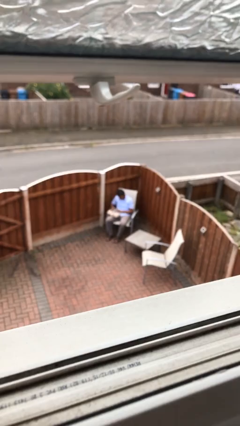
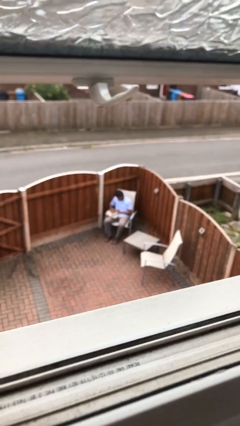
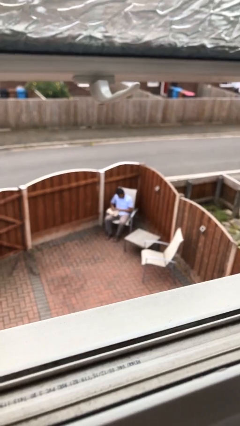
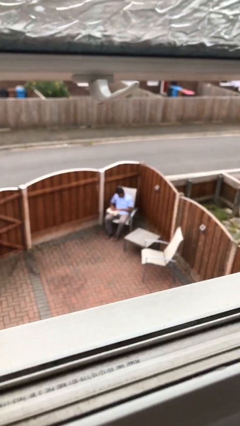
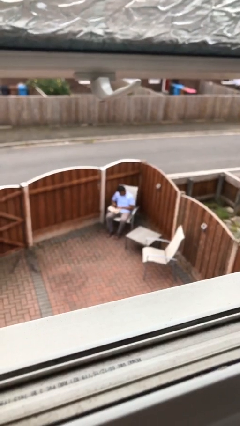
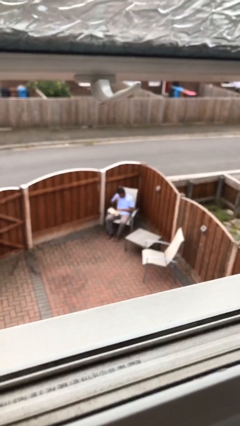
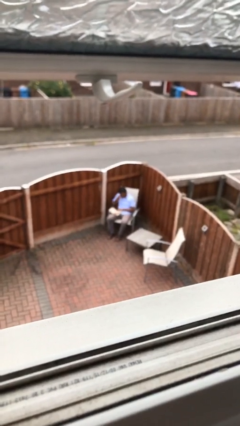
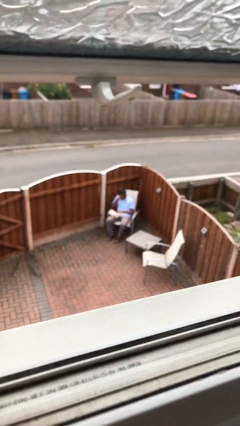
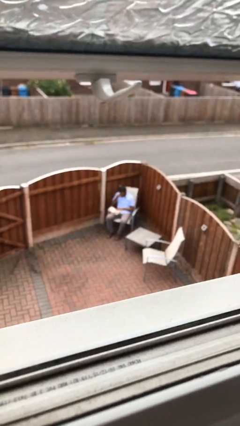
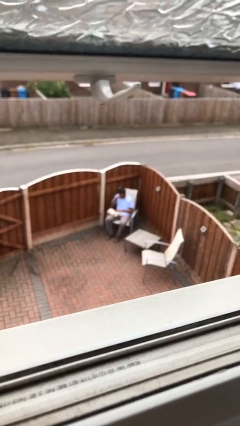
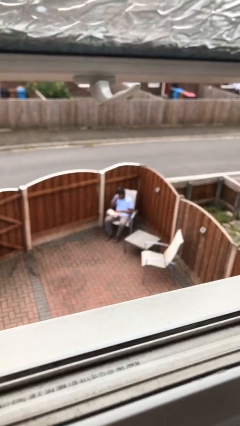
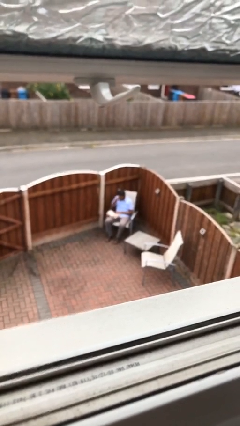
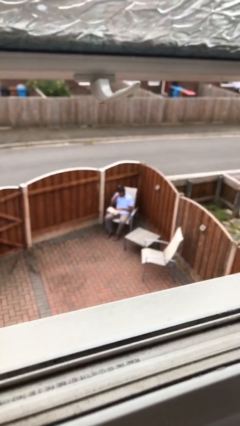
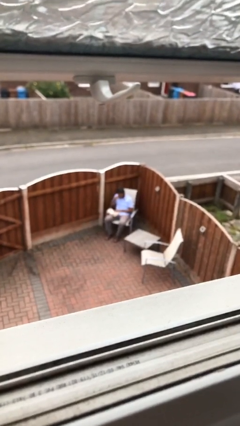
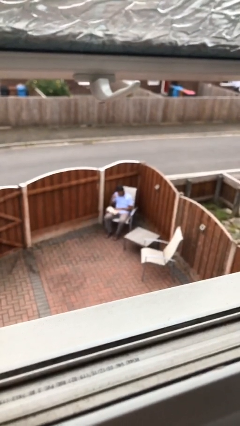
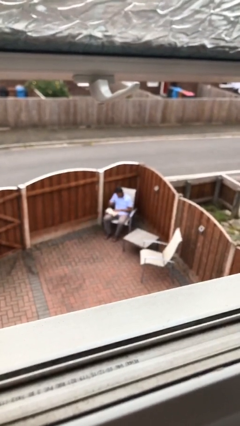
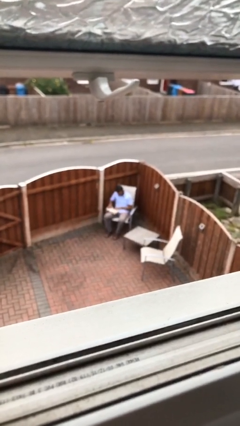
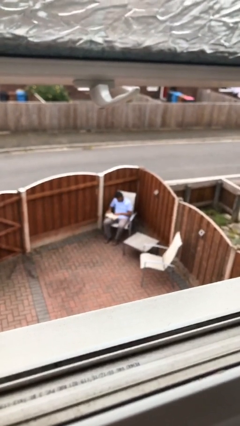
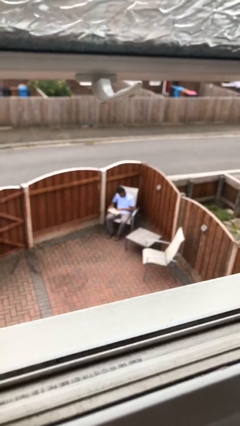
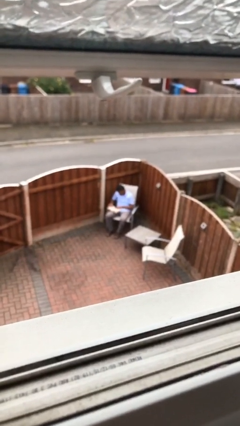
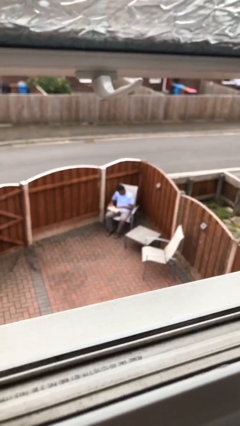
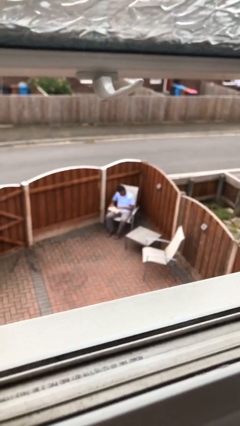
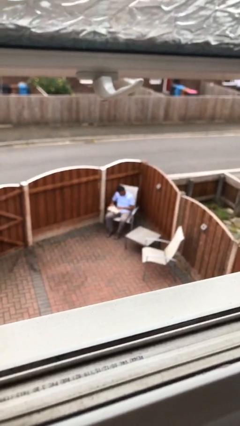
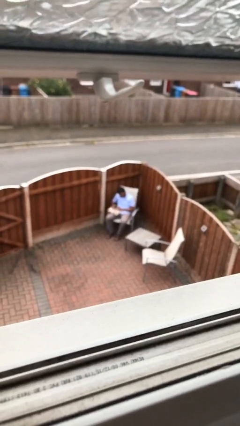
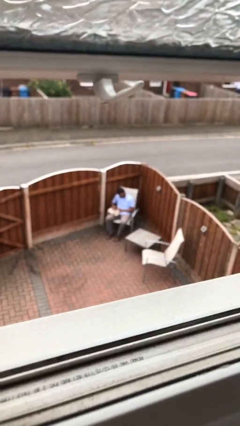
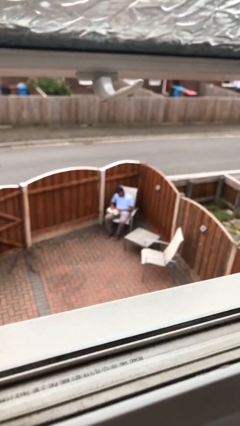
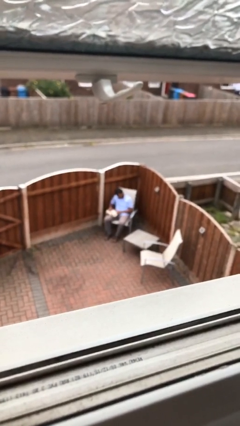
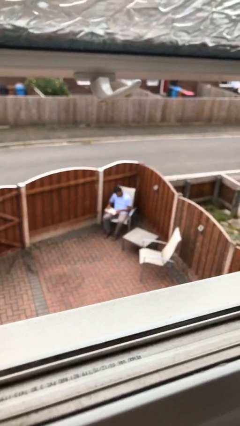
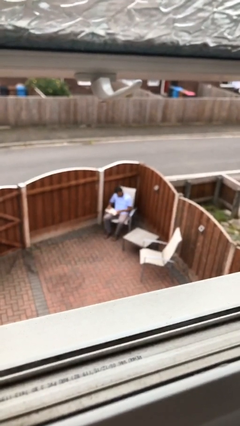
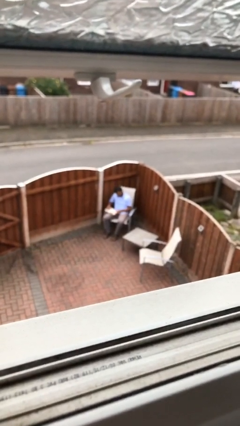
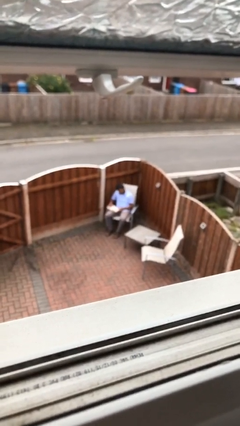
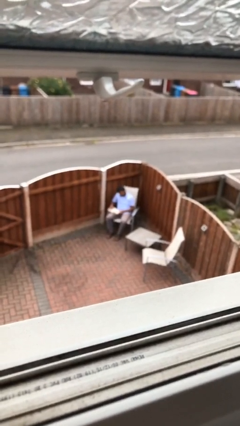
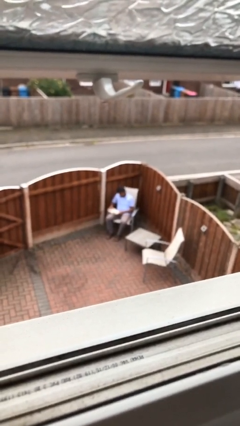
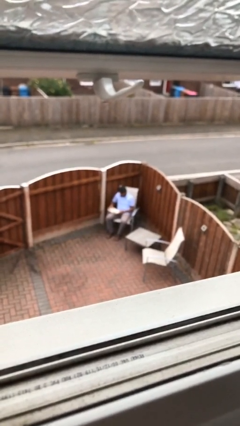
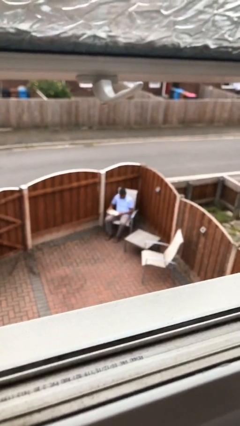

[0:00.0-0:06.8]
person reads document

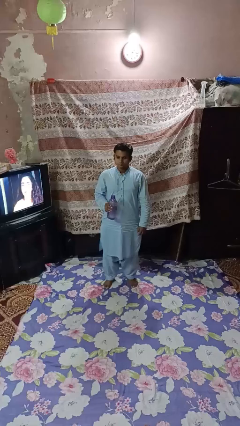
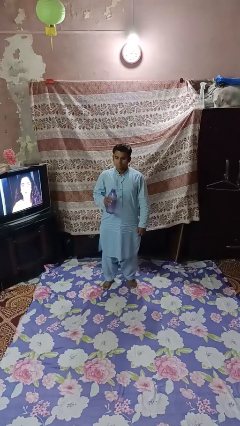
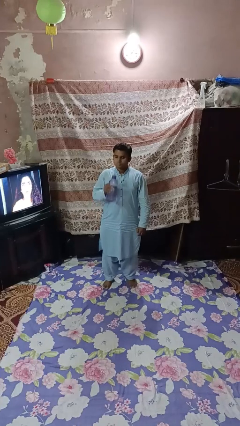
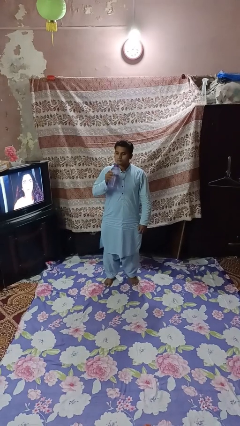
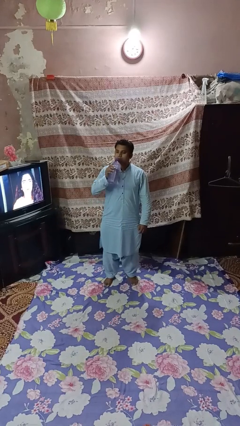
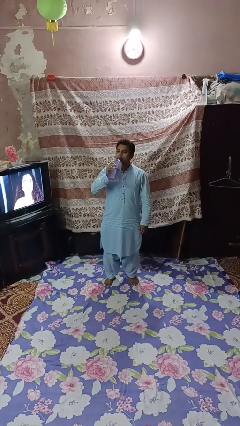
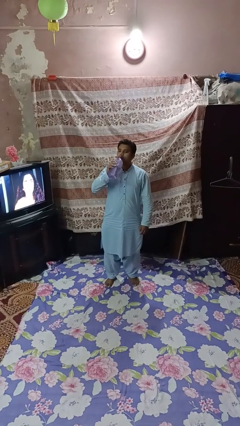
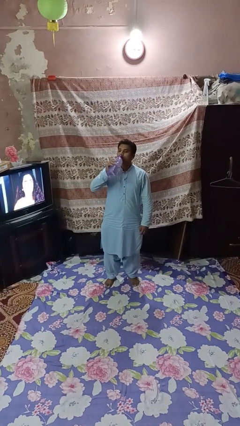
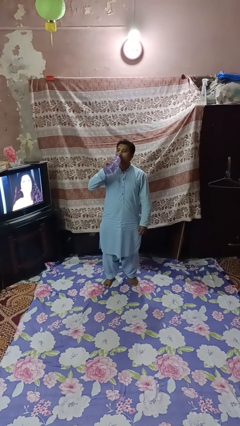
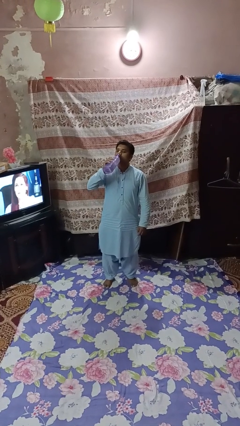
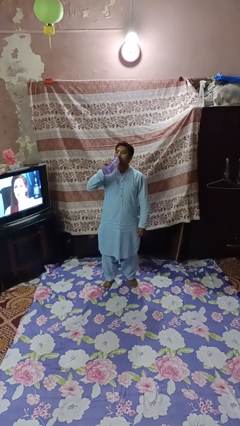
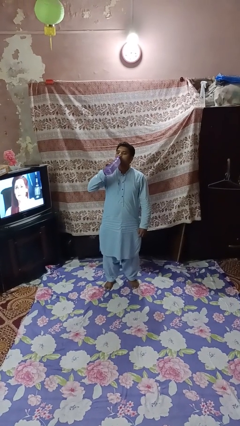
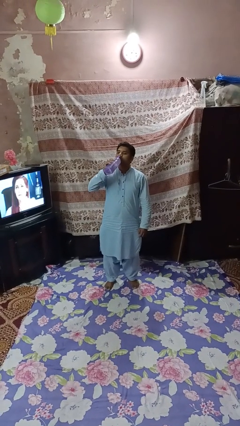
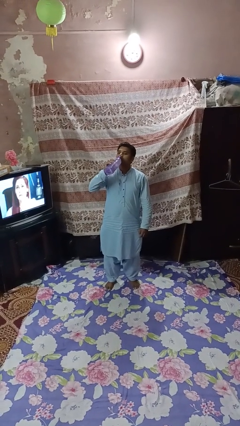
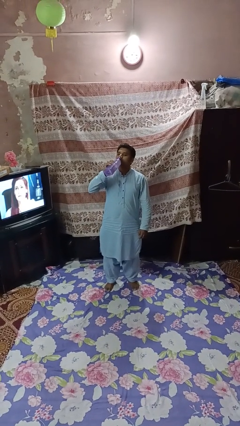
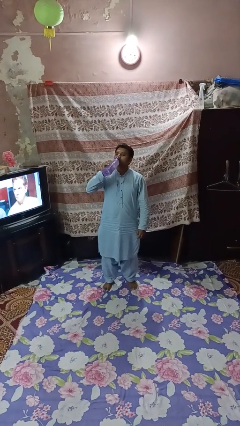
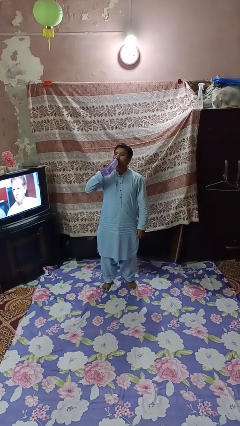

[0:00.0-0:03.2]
person drinks from bottle

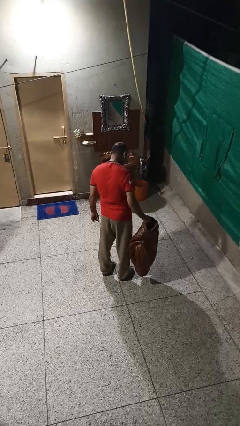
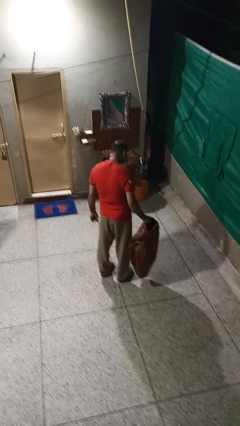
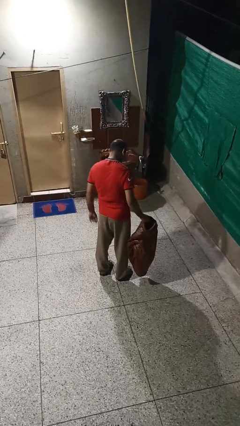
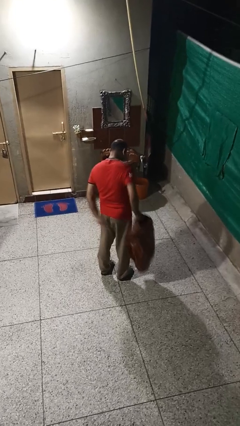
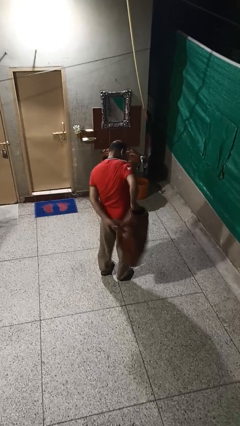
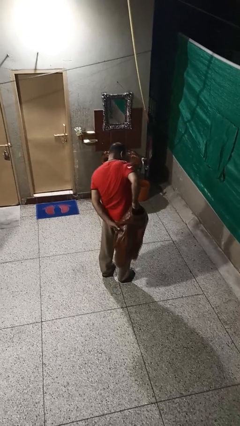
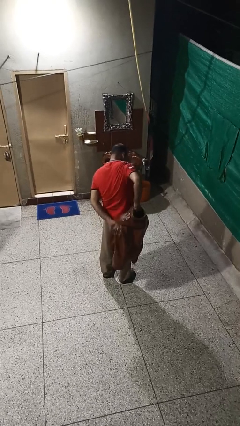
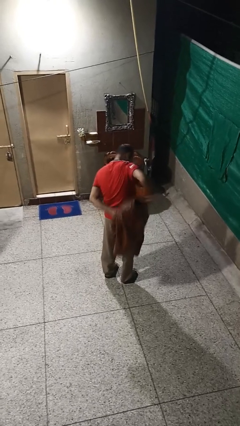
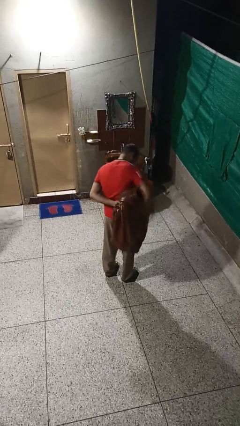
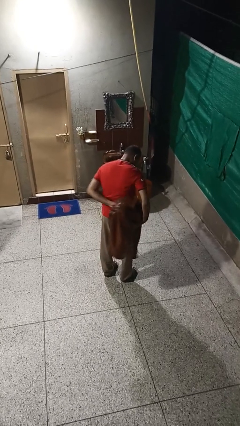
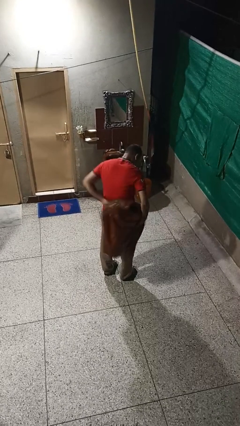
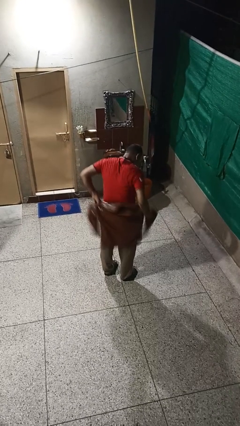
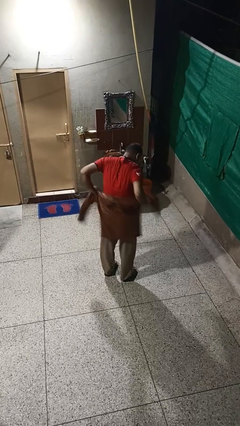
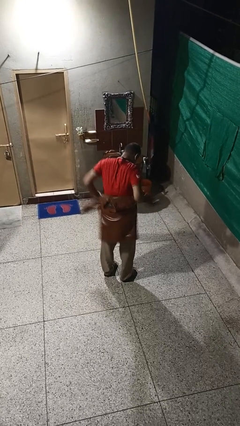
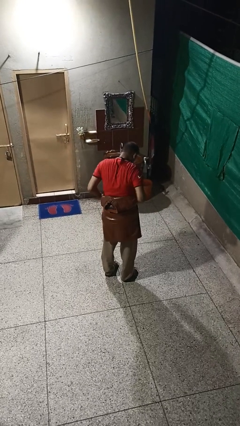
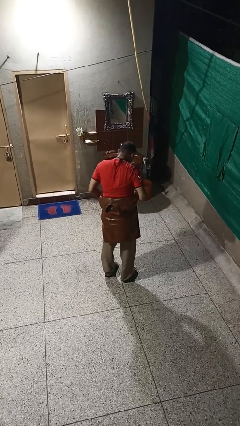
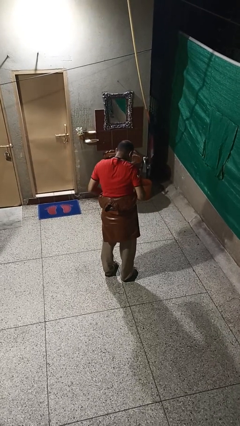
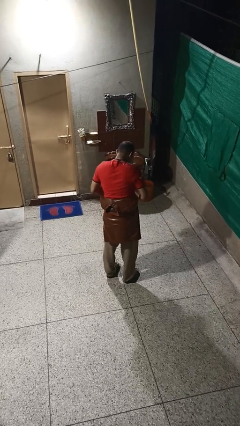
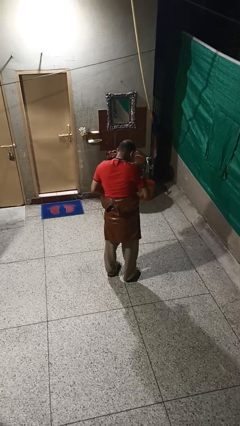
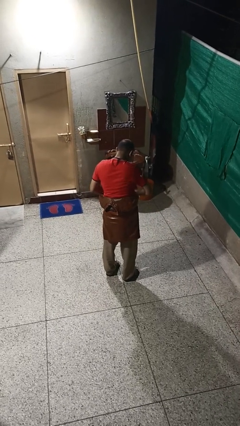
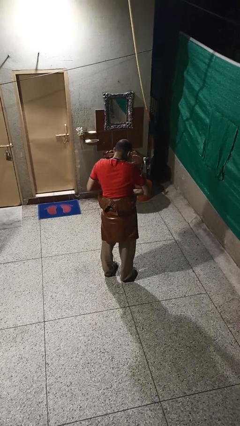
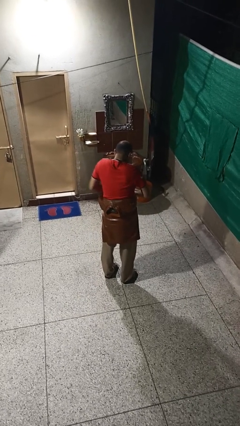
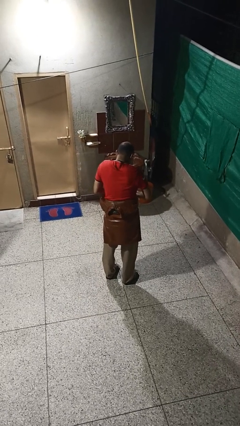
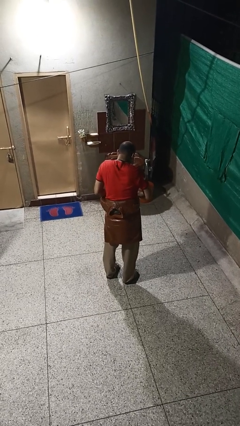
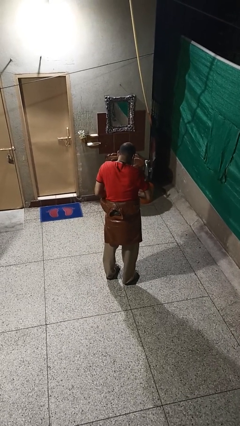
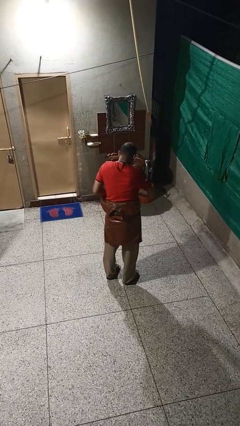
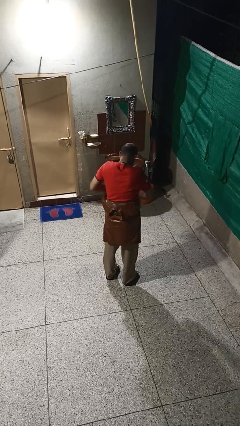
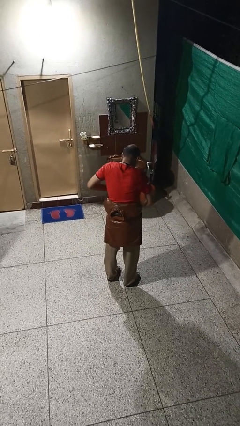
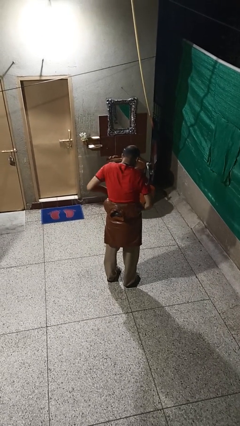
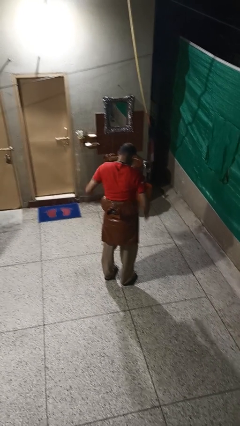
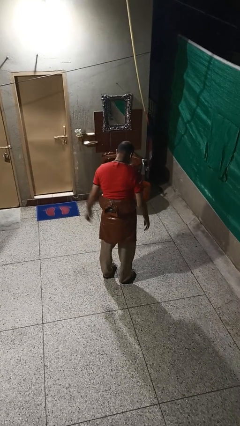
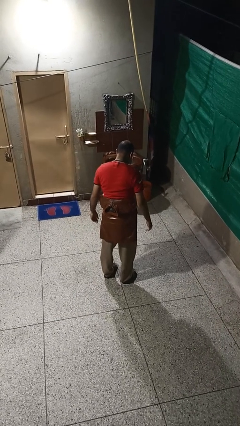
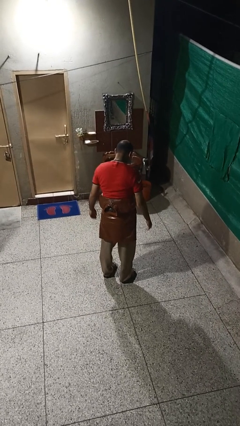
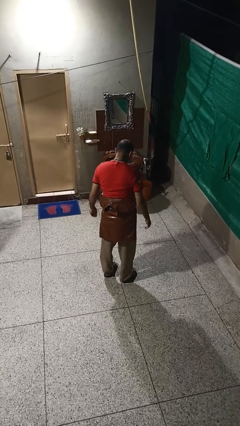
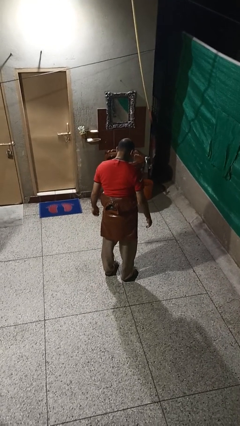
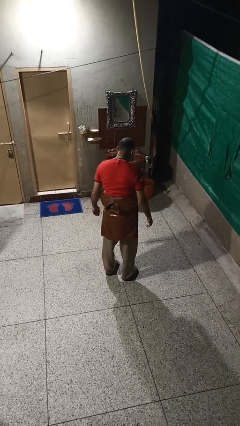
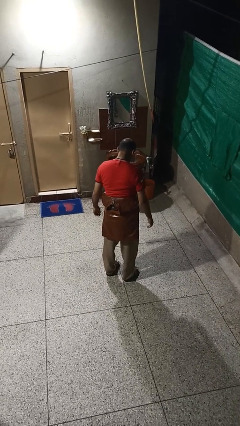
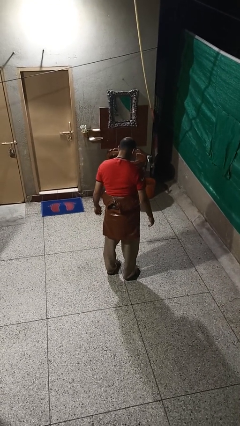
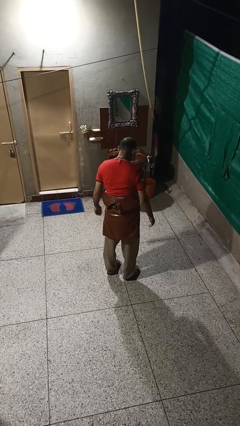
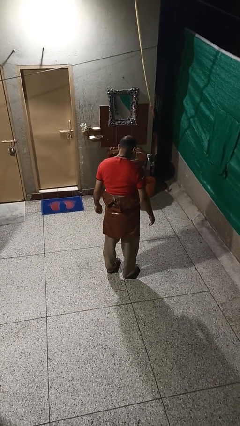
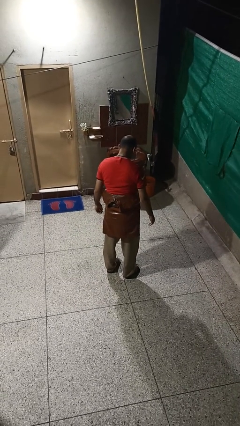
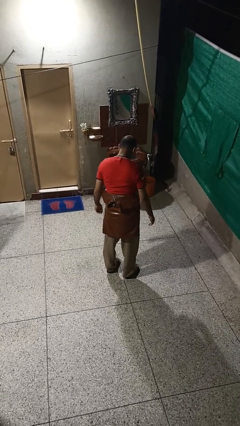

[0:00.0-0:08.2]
person ties jacket around waist
